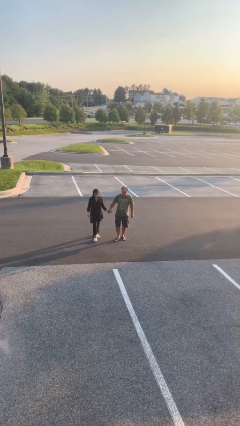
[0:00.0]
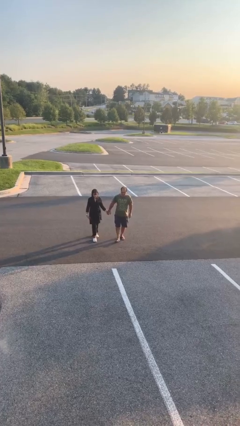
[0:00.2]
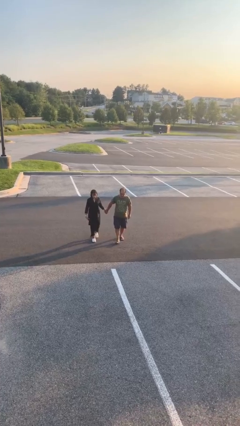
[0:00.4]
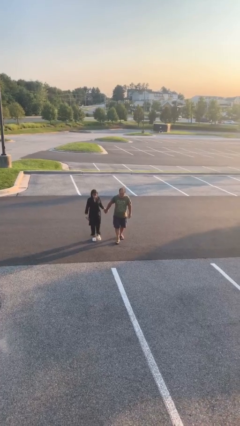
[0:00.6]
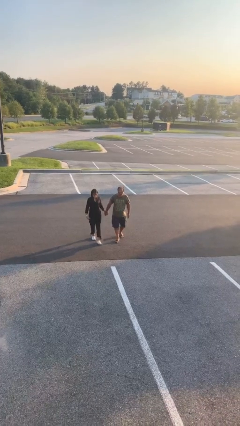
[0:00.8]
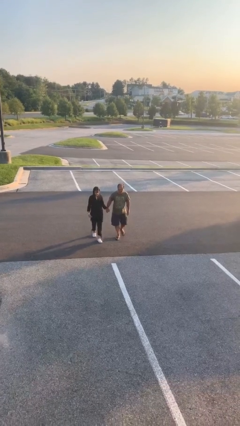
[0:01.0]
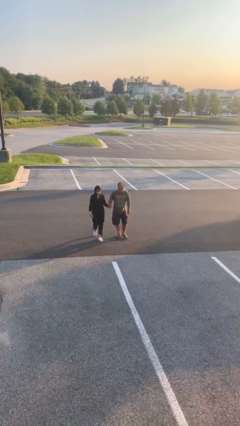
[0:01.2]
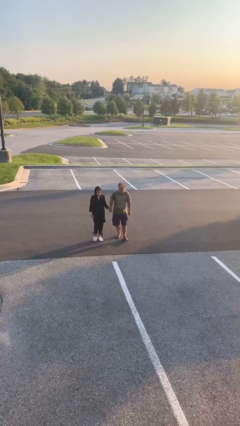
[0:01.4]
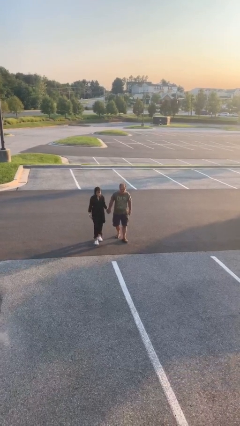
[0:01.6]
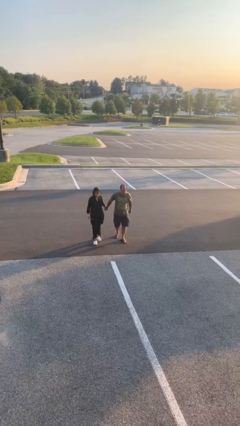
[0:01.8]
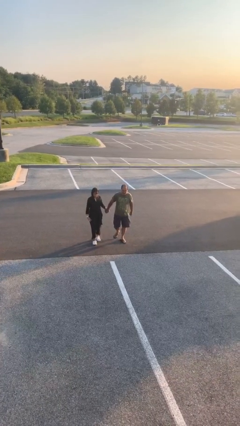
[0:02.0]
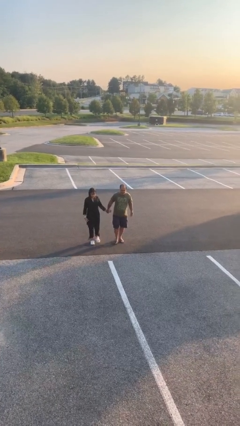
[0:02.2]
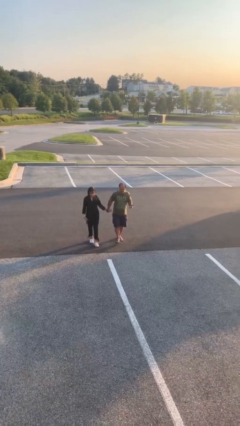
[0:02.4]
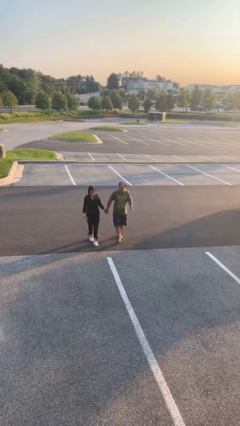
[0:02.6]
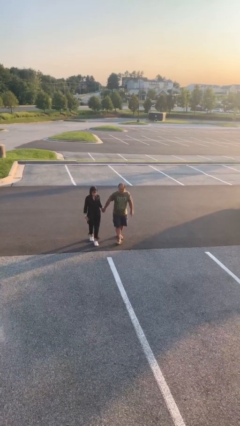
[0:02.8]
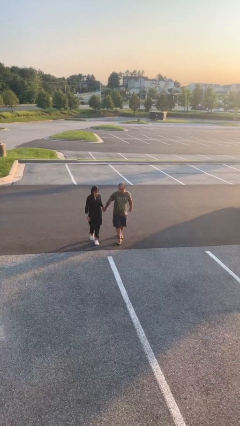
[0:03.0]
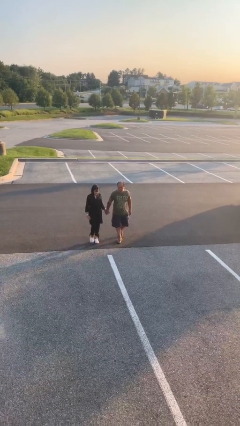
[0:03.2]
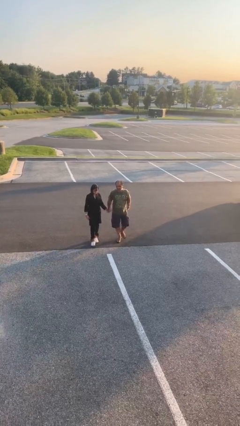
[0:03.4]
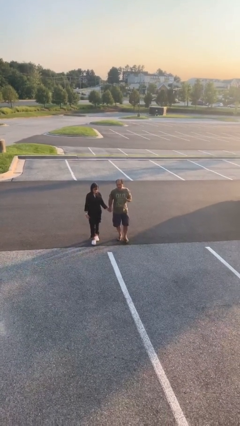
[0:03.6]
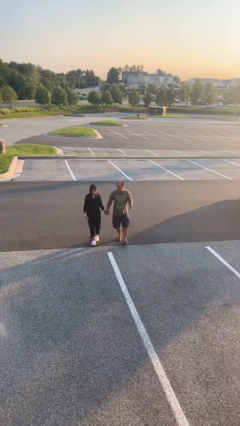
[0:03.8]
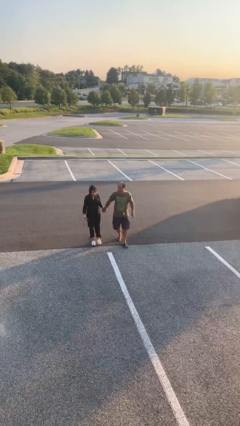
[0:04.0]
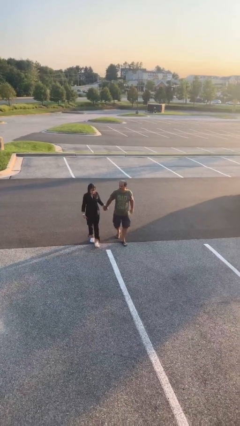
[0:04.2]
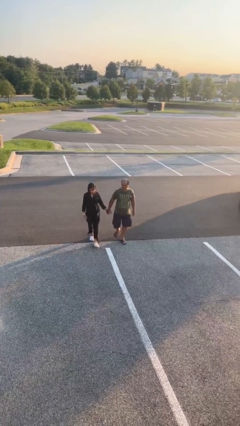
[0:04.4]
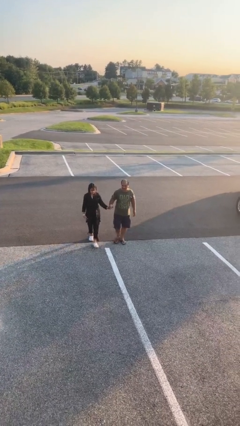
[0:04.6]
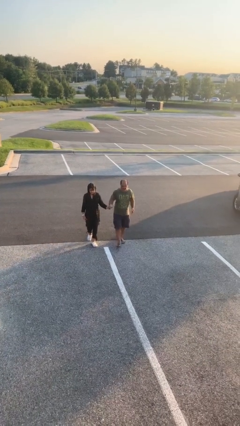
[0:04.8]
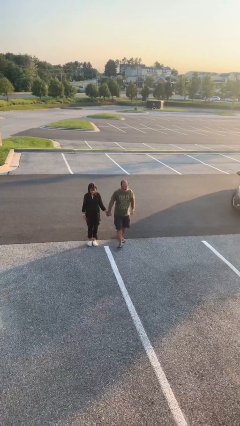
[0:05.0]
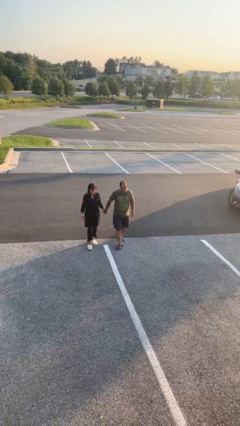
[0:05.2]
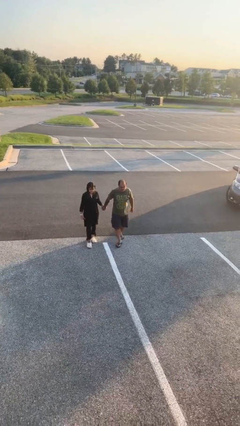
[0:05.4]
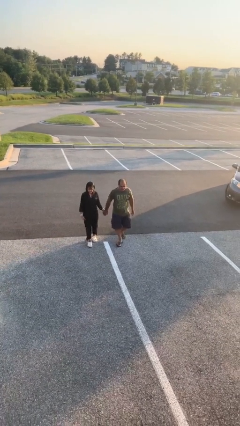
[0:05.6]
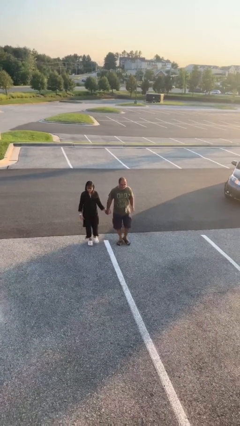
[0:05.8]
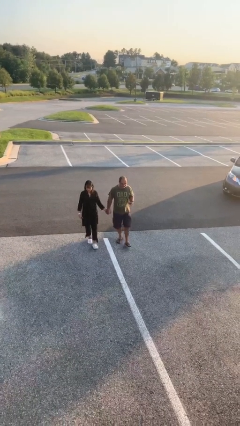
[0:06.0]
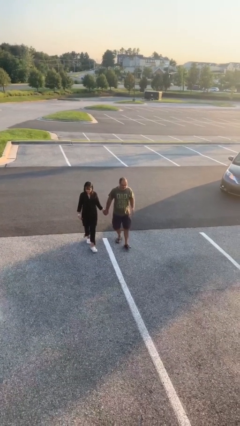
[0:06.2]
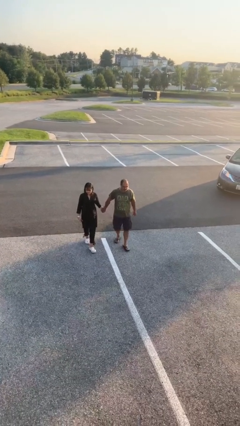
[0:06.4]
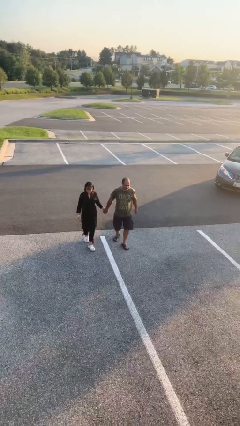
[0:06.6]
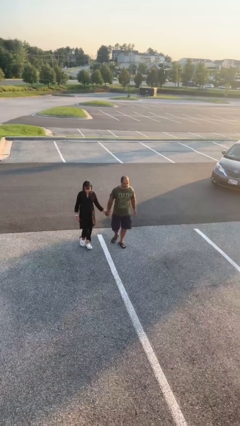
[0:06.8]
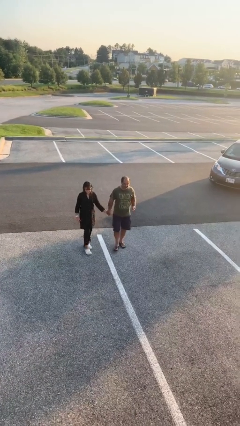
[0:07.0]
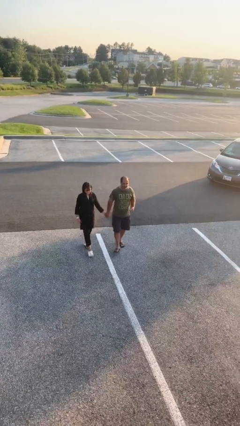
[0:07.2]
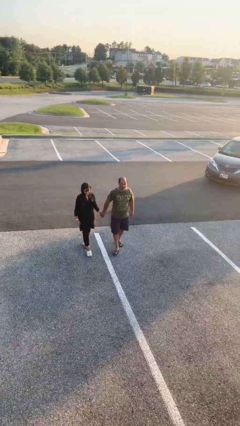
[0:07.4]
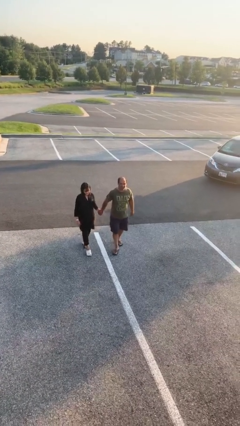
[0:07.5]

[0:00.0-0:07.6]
person holds hand

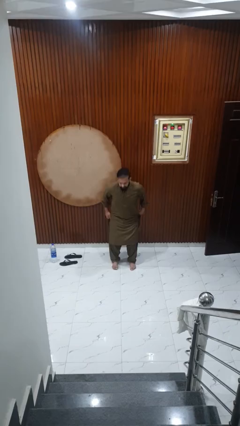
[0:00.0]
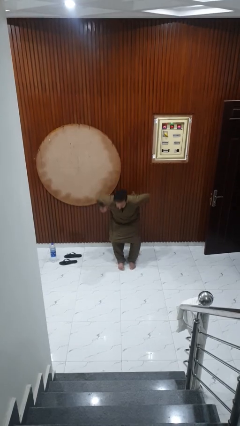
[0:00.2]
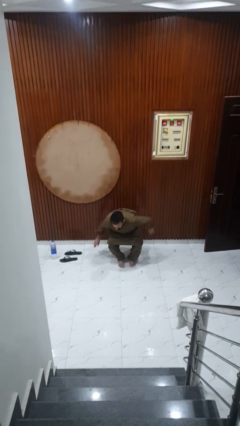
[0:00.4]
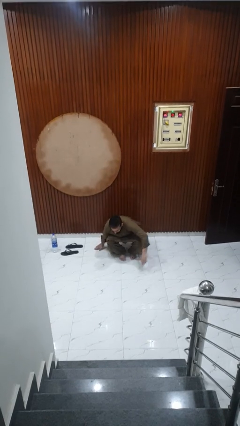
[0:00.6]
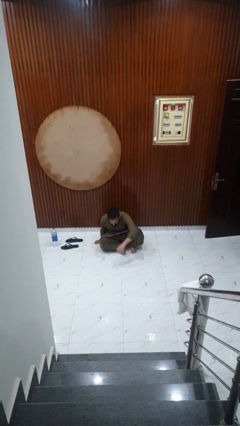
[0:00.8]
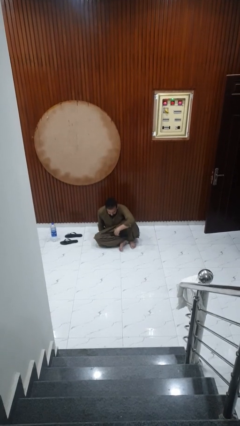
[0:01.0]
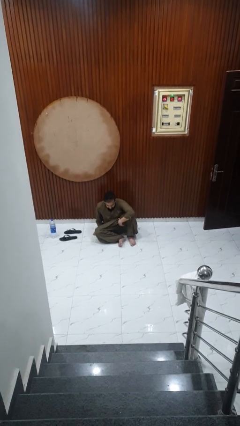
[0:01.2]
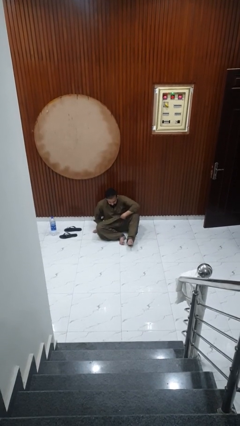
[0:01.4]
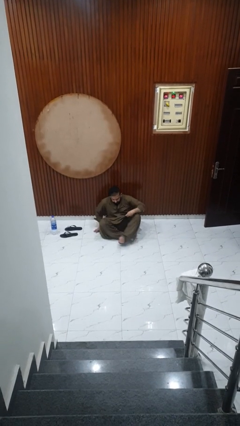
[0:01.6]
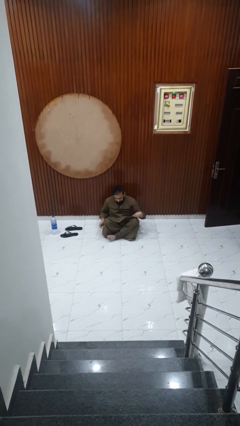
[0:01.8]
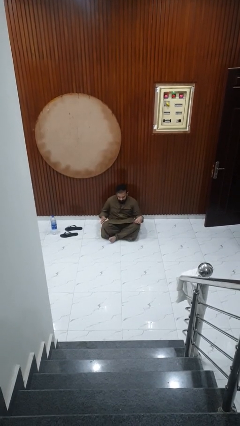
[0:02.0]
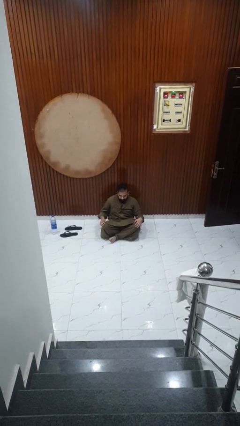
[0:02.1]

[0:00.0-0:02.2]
person sits crisscross

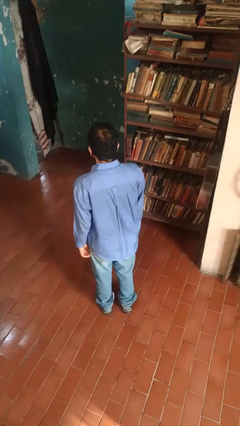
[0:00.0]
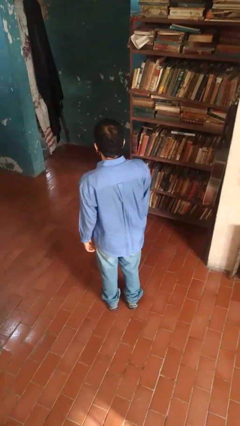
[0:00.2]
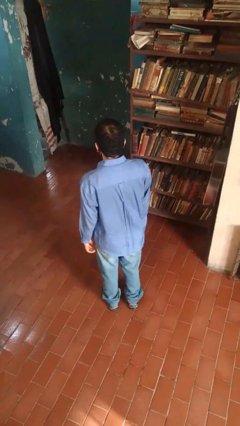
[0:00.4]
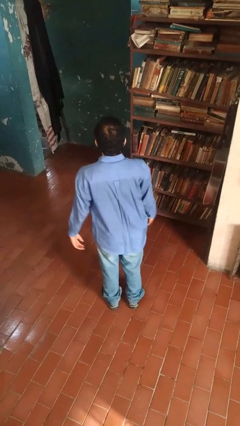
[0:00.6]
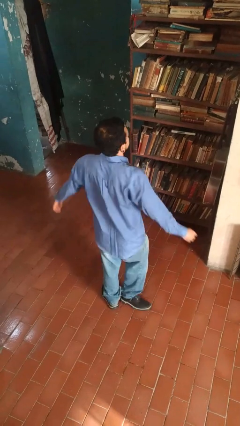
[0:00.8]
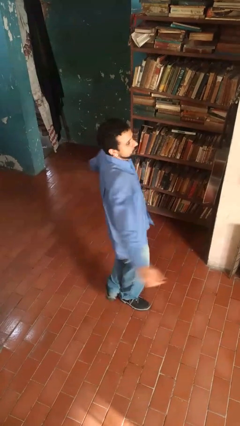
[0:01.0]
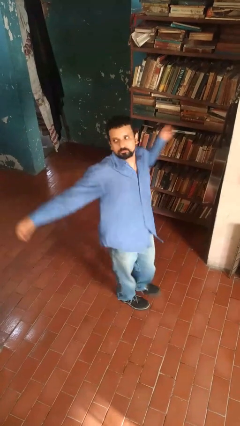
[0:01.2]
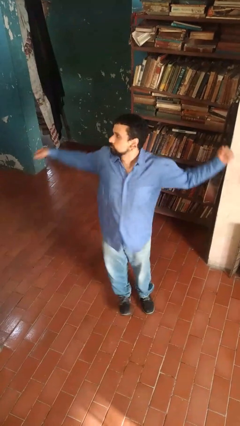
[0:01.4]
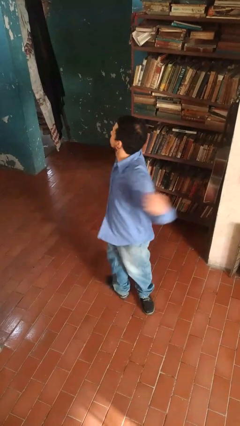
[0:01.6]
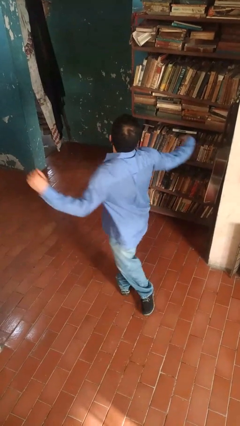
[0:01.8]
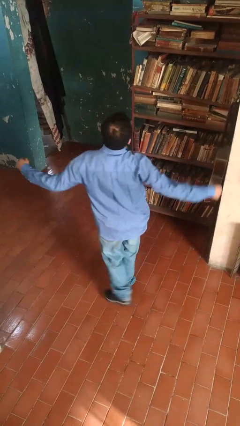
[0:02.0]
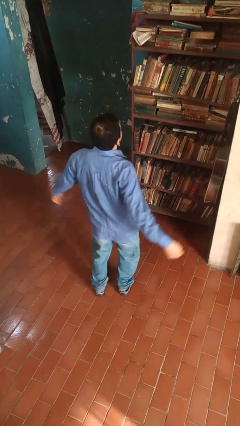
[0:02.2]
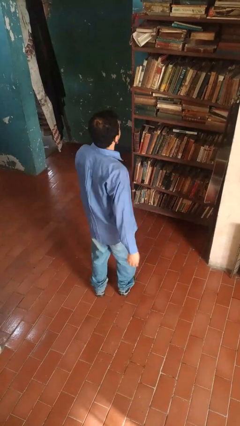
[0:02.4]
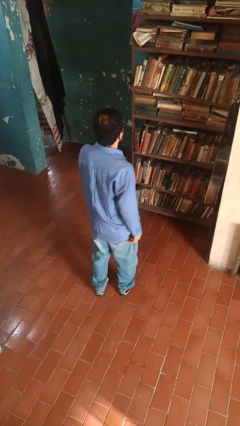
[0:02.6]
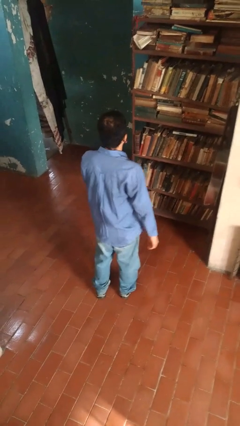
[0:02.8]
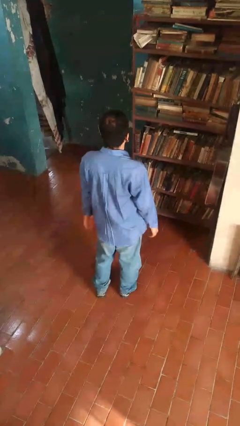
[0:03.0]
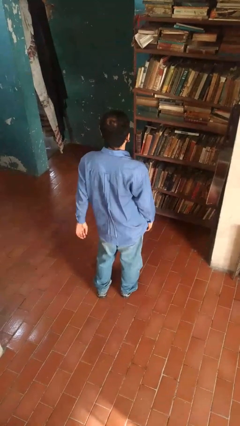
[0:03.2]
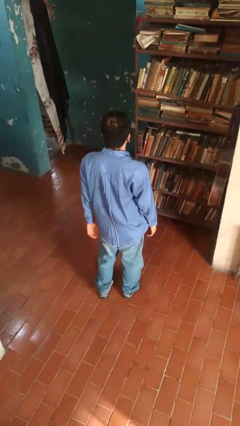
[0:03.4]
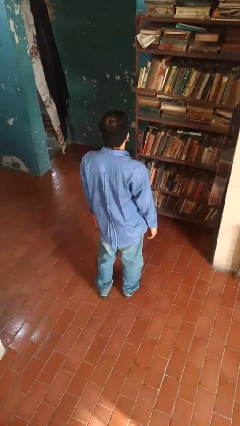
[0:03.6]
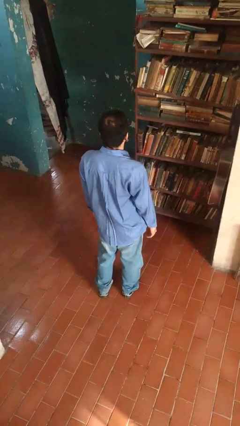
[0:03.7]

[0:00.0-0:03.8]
person twirls

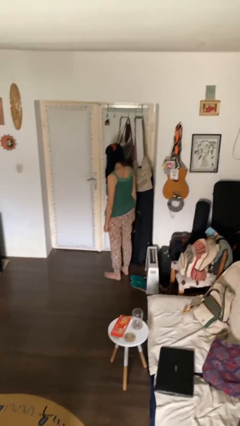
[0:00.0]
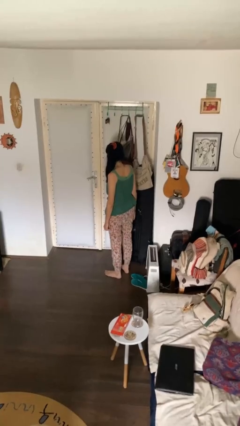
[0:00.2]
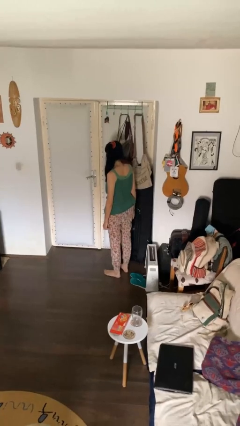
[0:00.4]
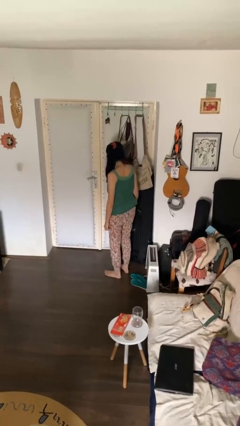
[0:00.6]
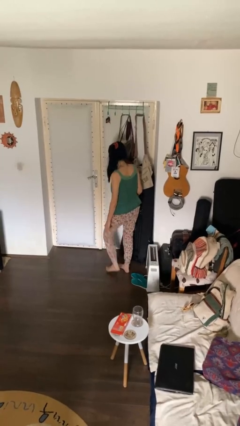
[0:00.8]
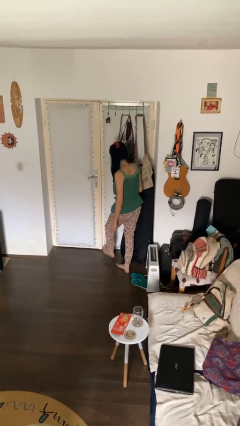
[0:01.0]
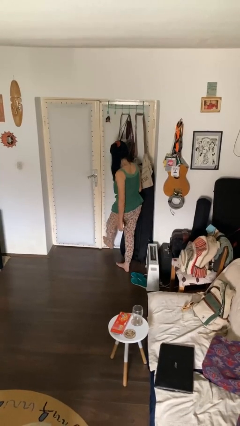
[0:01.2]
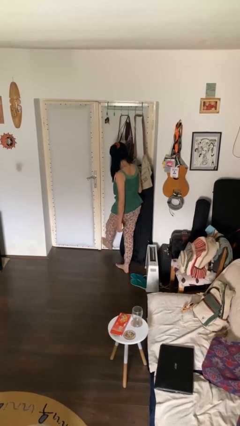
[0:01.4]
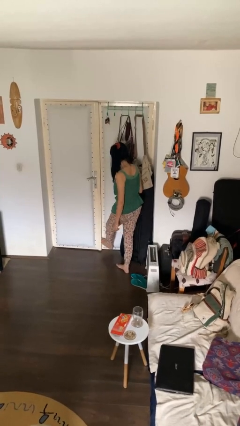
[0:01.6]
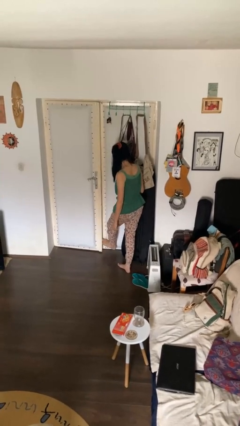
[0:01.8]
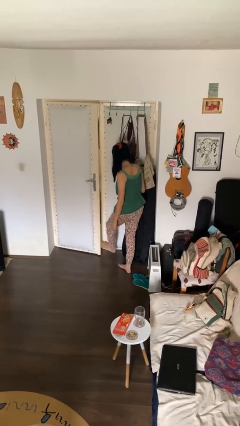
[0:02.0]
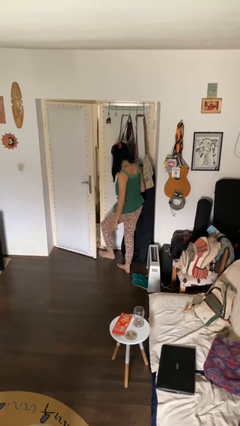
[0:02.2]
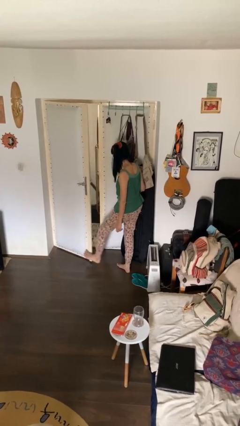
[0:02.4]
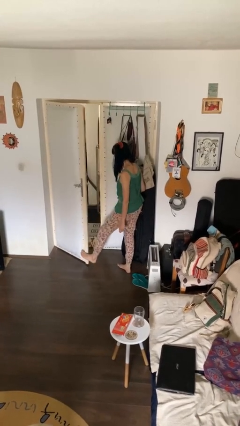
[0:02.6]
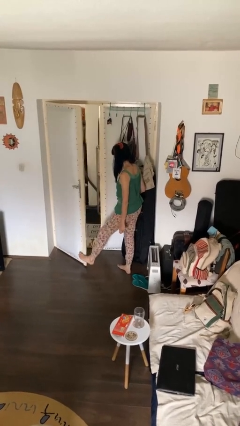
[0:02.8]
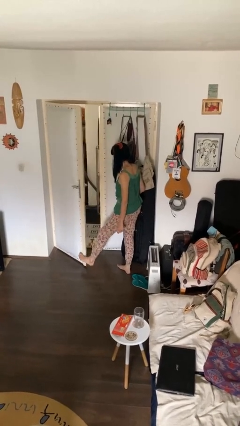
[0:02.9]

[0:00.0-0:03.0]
person opens facility door

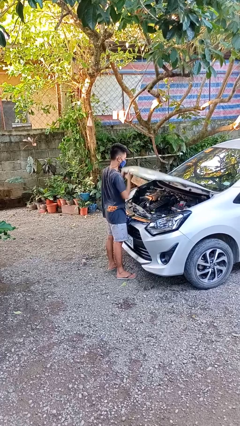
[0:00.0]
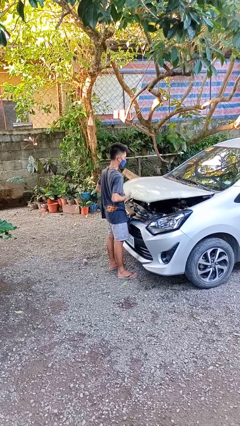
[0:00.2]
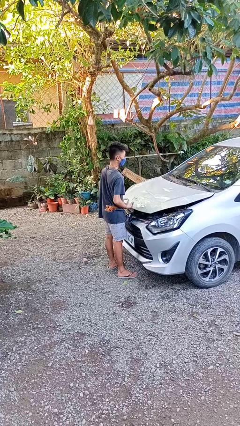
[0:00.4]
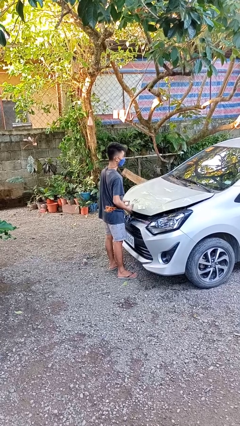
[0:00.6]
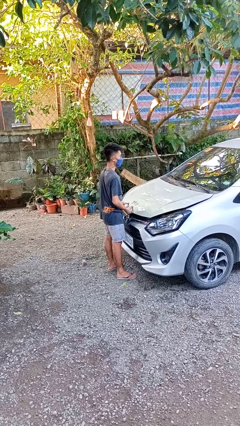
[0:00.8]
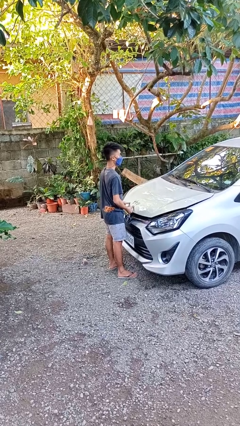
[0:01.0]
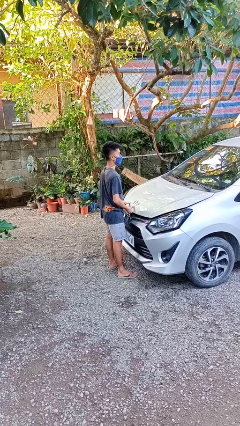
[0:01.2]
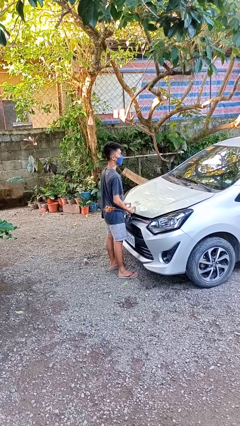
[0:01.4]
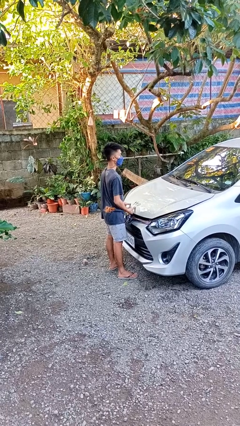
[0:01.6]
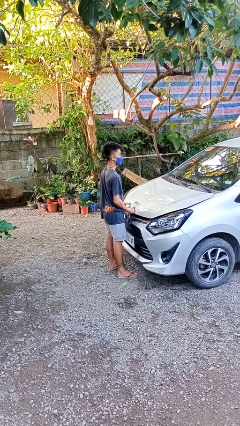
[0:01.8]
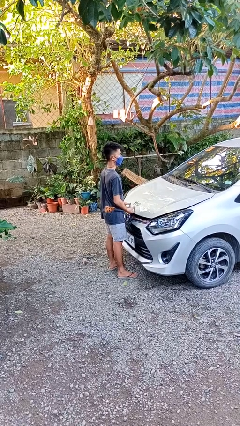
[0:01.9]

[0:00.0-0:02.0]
person closes car hood
